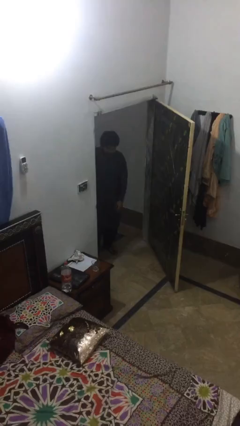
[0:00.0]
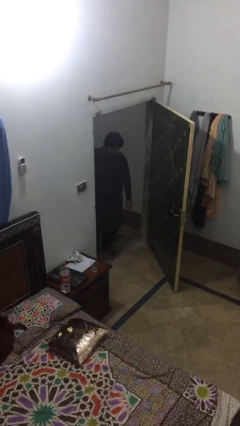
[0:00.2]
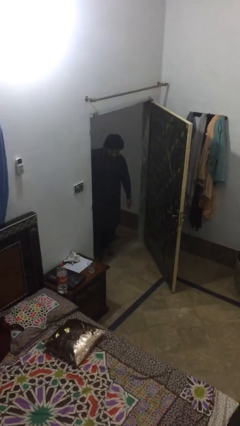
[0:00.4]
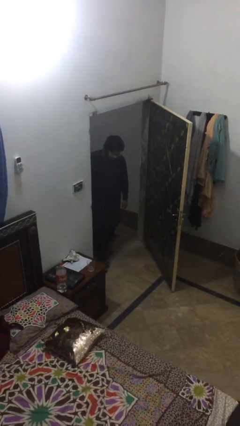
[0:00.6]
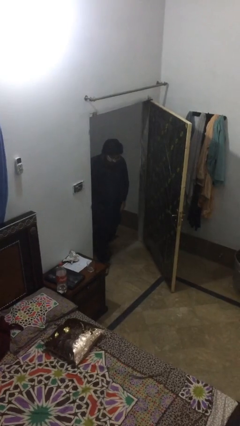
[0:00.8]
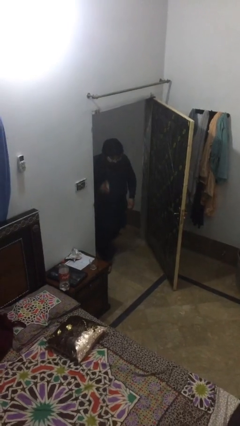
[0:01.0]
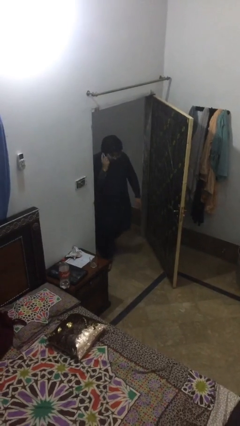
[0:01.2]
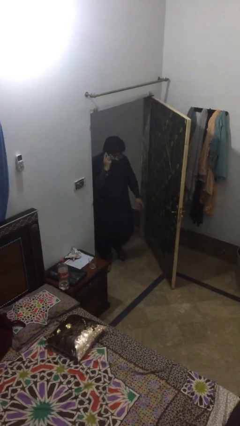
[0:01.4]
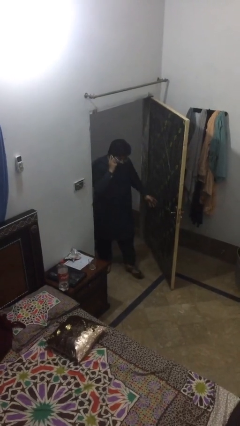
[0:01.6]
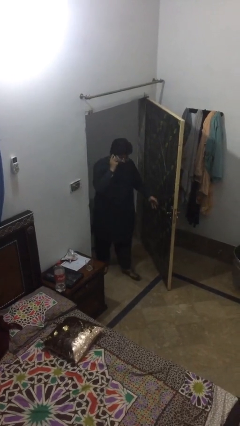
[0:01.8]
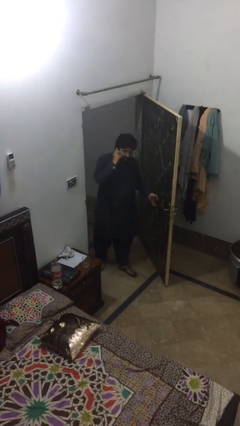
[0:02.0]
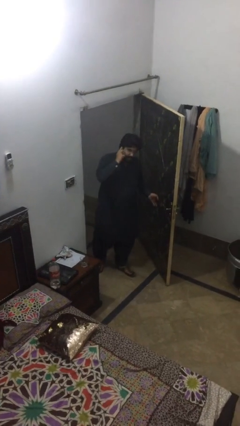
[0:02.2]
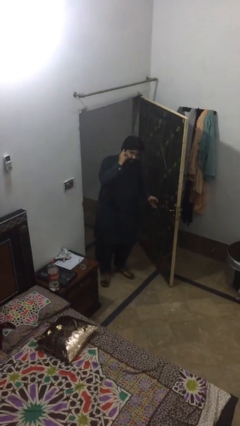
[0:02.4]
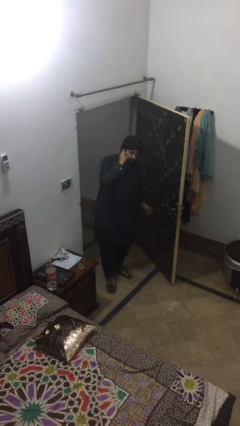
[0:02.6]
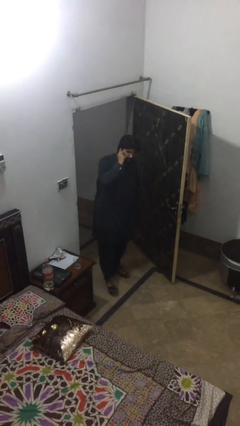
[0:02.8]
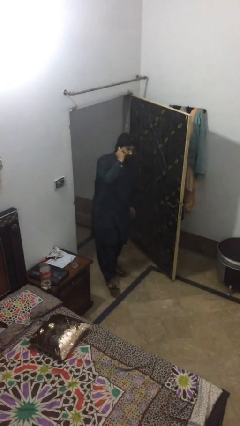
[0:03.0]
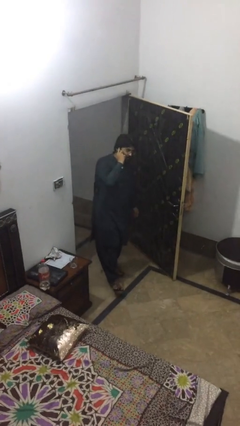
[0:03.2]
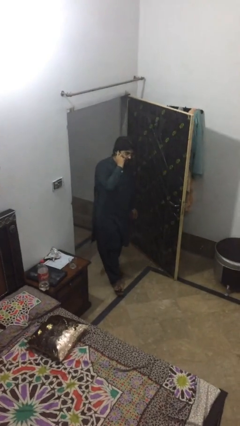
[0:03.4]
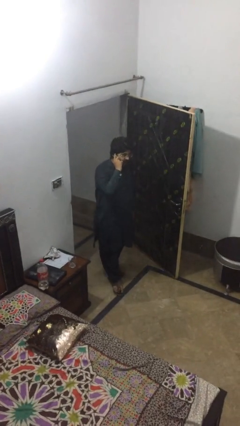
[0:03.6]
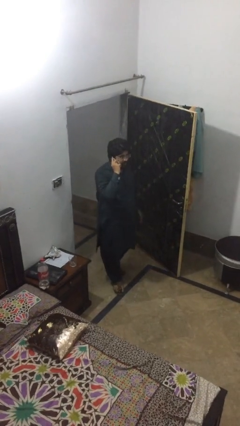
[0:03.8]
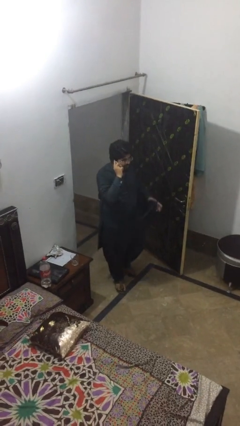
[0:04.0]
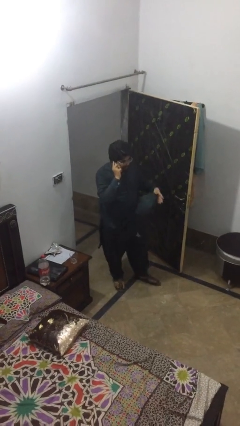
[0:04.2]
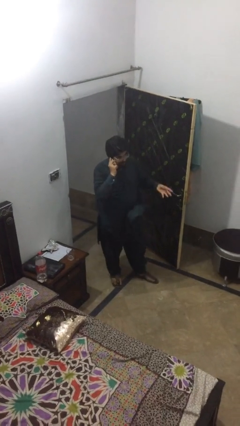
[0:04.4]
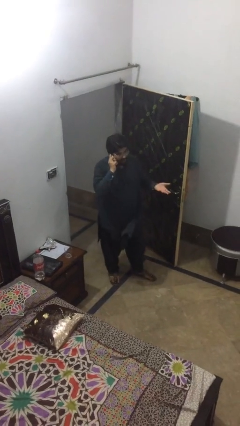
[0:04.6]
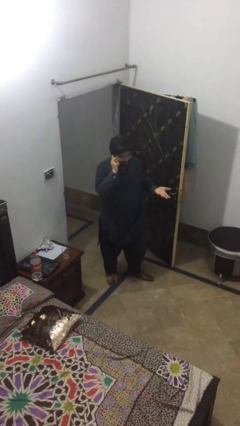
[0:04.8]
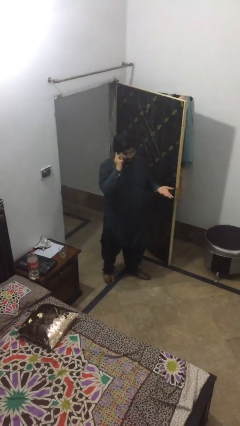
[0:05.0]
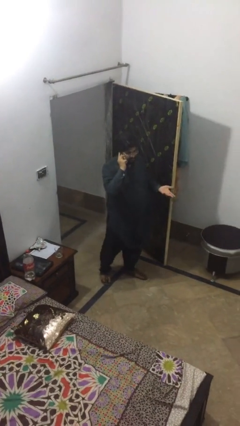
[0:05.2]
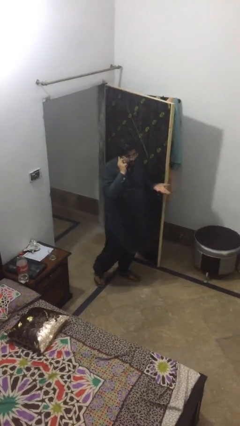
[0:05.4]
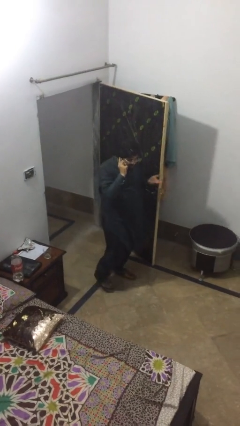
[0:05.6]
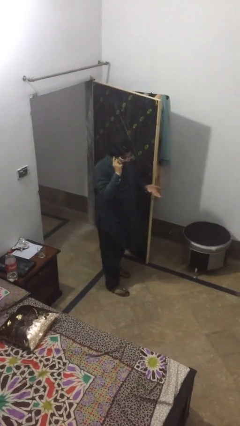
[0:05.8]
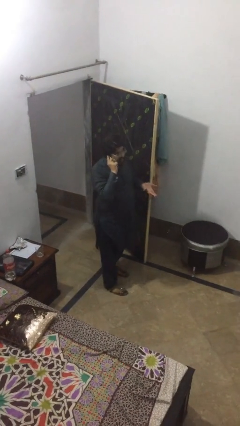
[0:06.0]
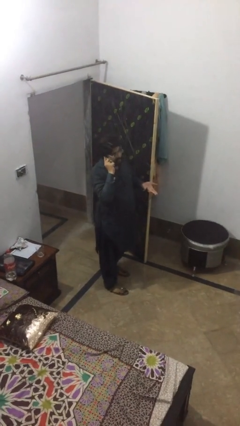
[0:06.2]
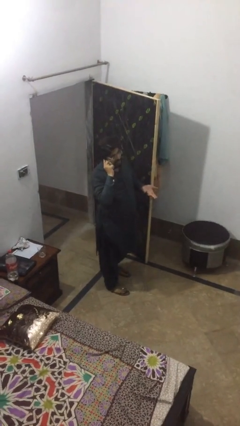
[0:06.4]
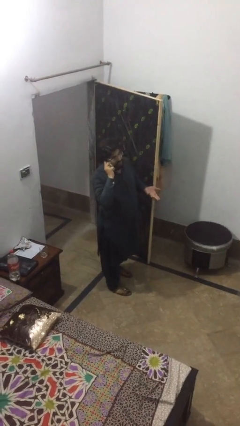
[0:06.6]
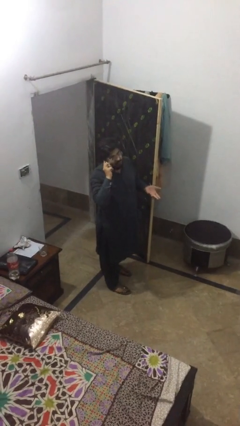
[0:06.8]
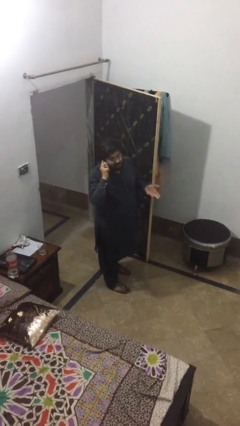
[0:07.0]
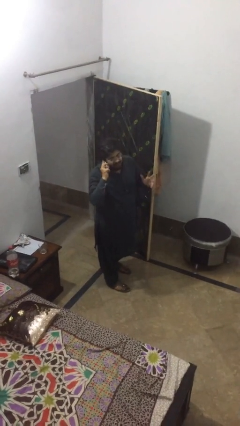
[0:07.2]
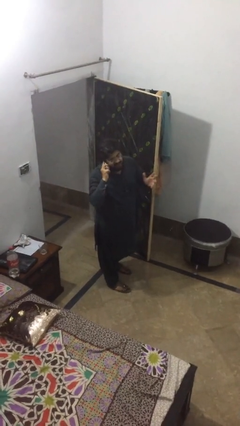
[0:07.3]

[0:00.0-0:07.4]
person enters scene through structure

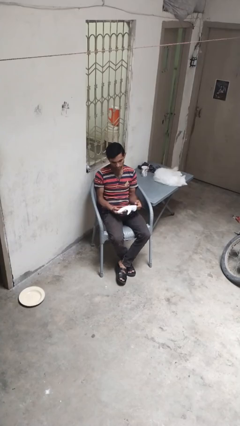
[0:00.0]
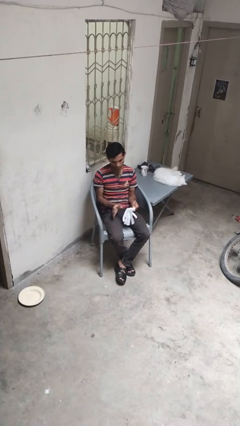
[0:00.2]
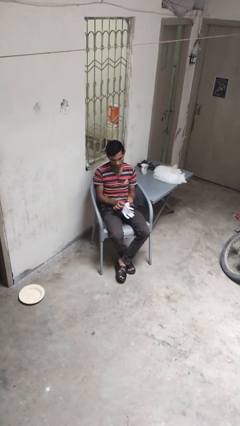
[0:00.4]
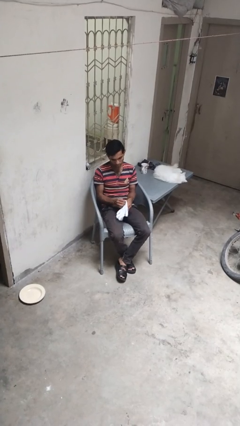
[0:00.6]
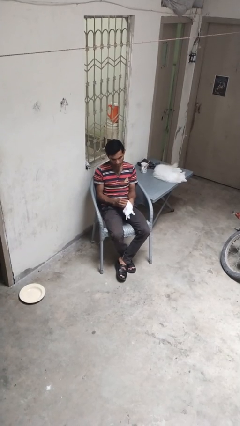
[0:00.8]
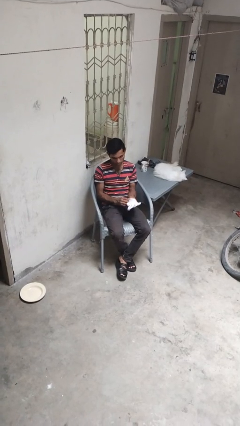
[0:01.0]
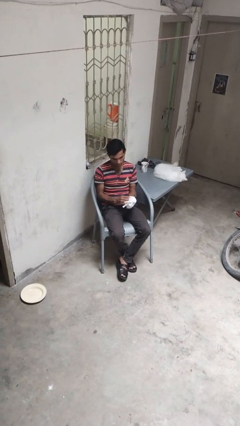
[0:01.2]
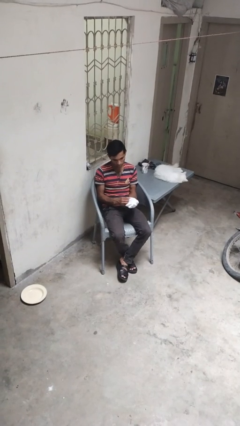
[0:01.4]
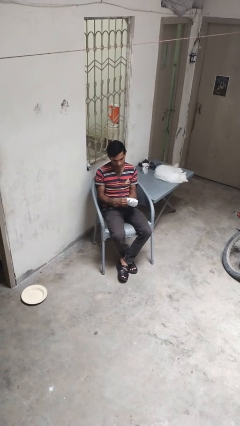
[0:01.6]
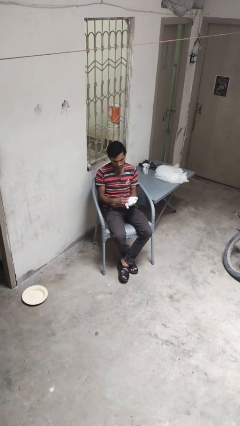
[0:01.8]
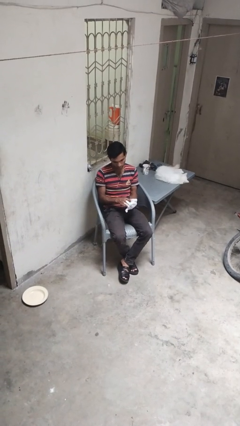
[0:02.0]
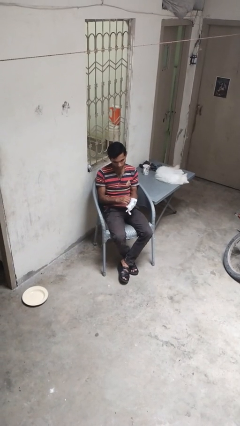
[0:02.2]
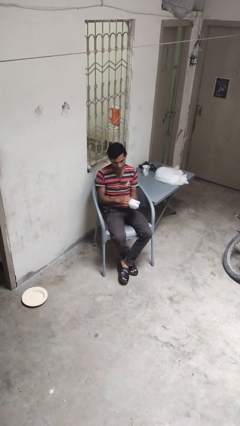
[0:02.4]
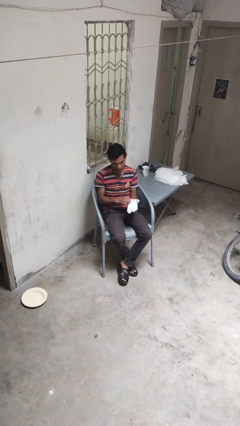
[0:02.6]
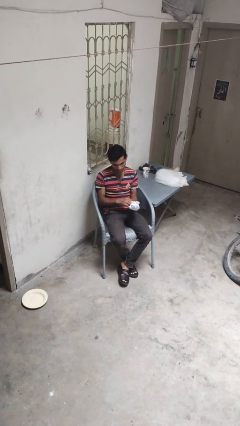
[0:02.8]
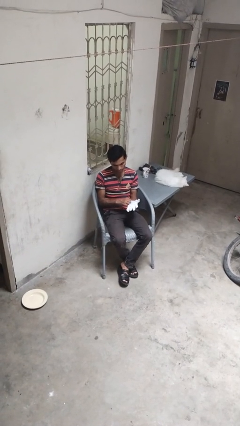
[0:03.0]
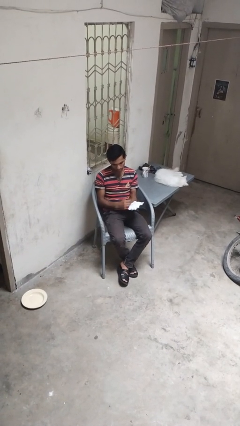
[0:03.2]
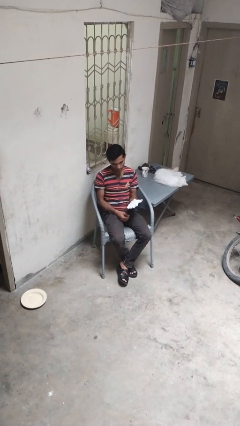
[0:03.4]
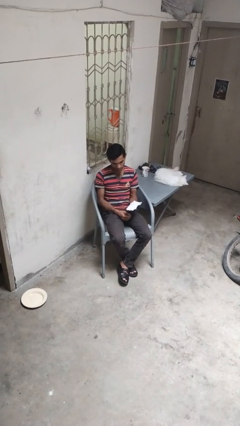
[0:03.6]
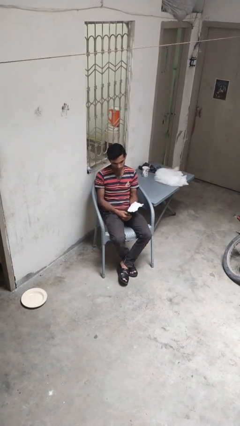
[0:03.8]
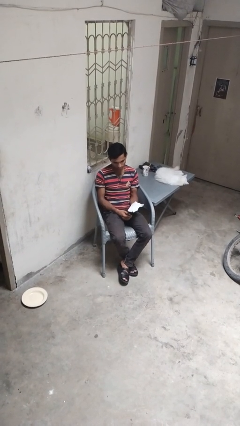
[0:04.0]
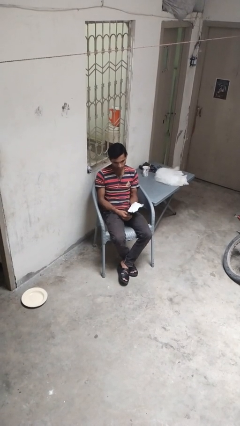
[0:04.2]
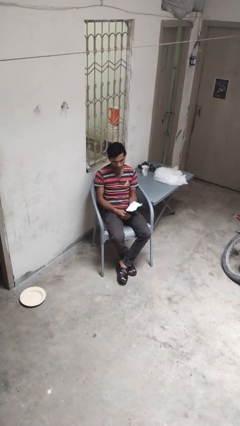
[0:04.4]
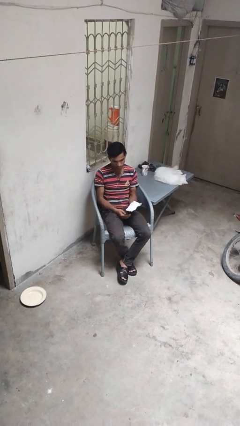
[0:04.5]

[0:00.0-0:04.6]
person puts on gloves

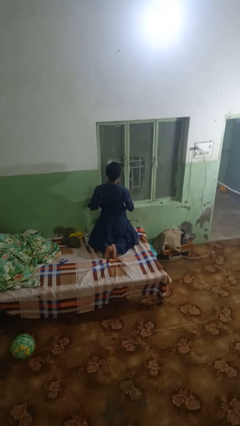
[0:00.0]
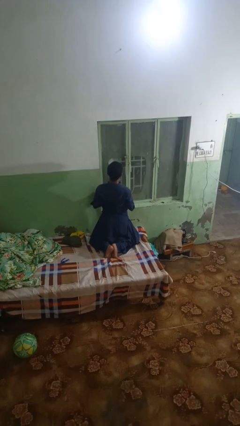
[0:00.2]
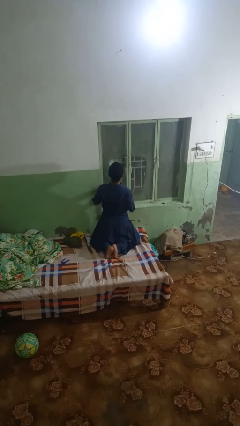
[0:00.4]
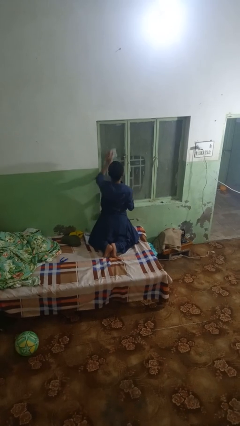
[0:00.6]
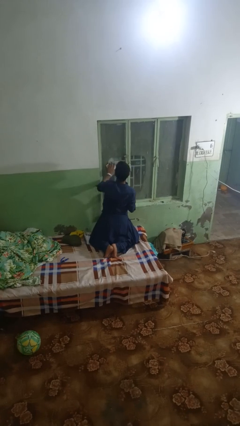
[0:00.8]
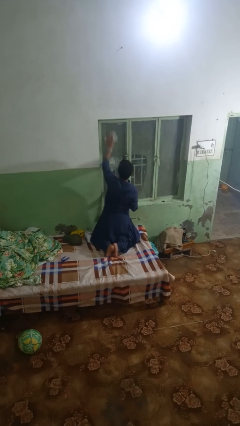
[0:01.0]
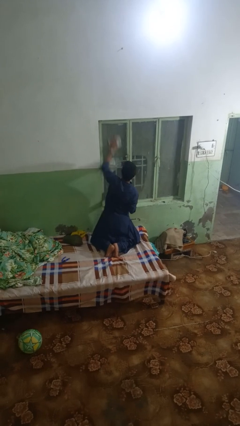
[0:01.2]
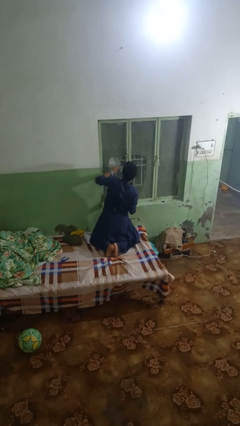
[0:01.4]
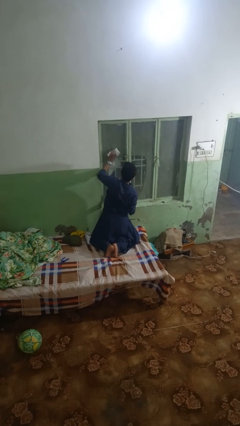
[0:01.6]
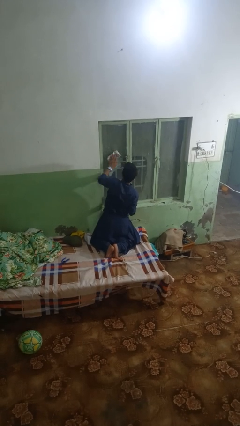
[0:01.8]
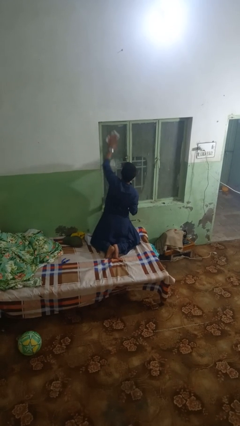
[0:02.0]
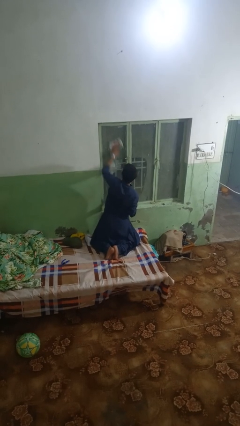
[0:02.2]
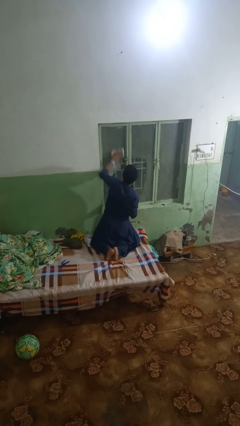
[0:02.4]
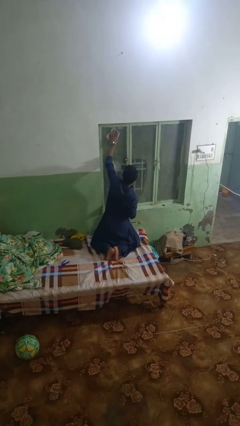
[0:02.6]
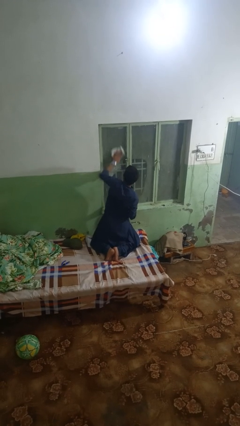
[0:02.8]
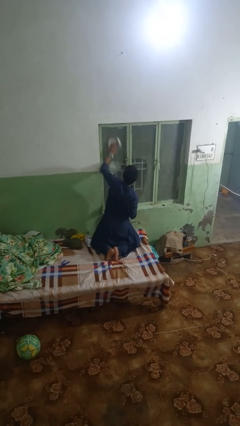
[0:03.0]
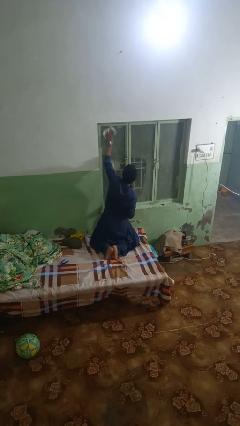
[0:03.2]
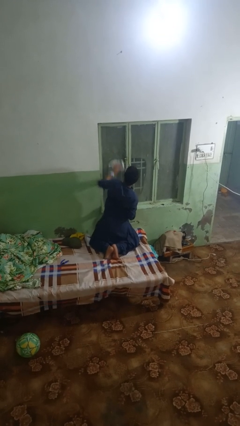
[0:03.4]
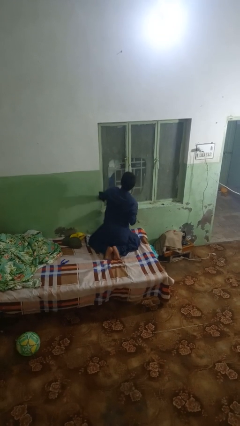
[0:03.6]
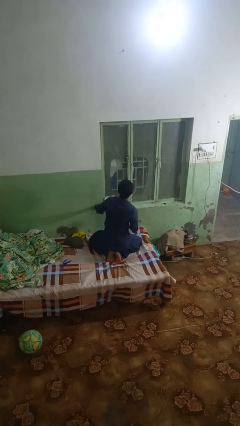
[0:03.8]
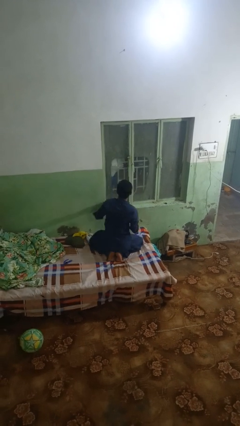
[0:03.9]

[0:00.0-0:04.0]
person washes window

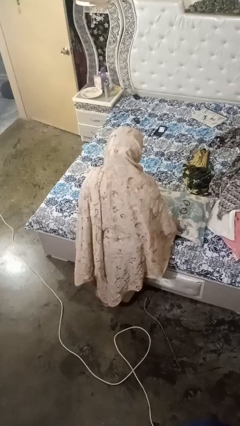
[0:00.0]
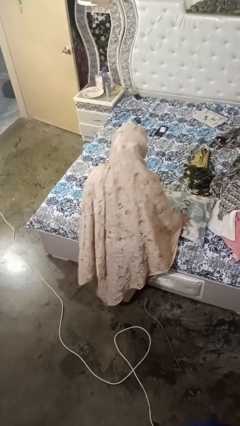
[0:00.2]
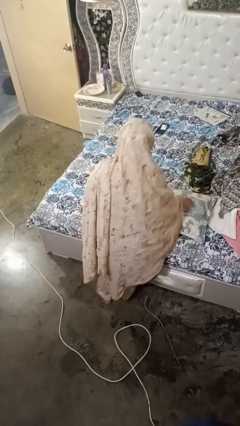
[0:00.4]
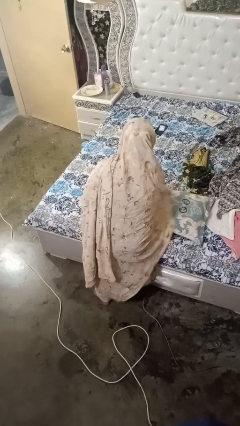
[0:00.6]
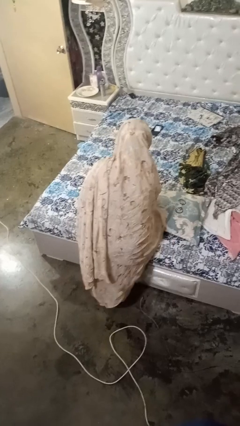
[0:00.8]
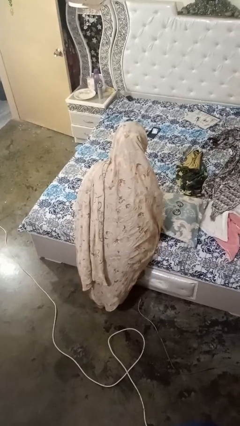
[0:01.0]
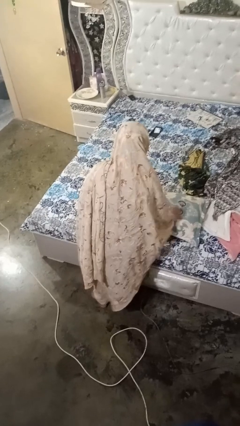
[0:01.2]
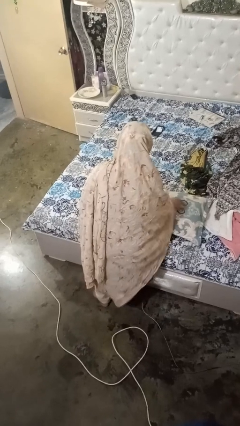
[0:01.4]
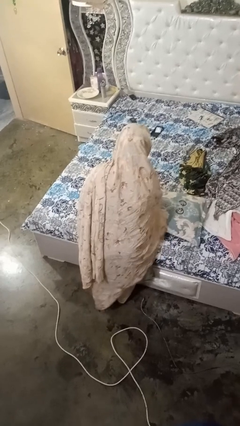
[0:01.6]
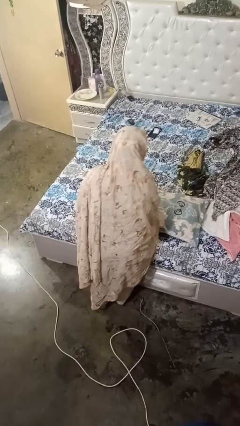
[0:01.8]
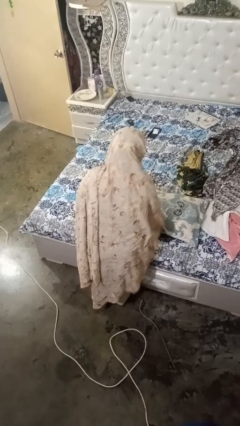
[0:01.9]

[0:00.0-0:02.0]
person waves hand over object

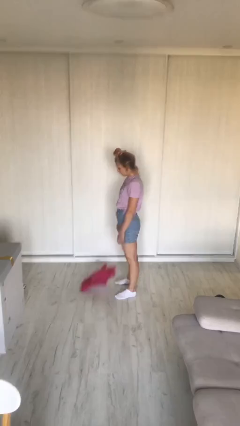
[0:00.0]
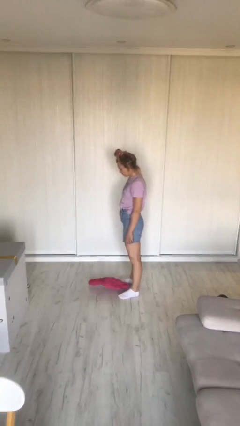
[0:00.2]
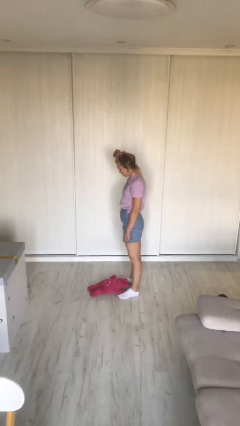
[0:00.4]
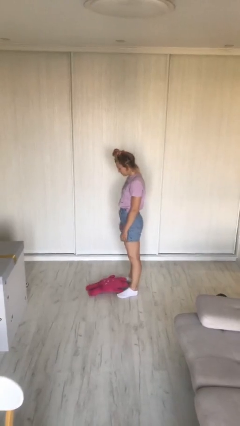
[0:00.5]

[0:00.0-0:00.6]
person drops object
